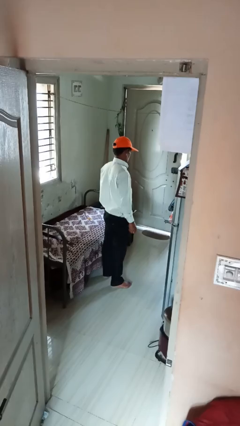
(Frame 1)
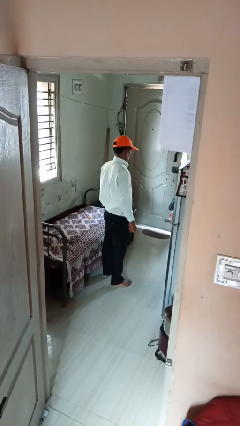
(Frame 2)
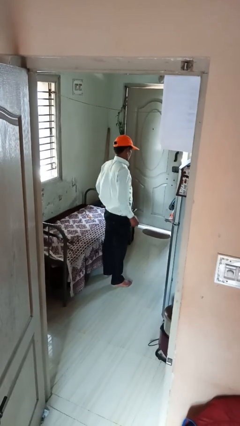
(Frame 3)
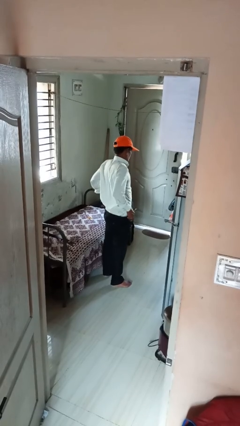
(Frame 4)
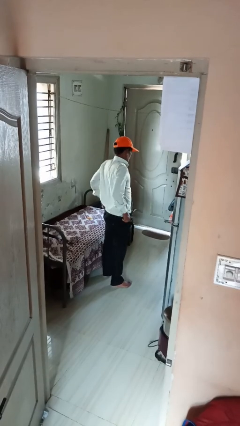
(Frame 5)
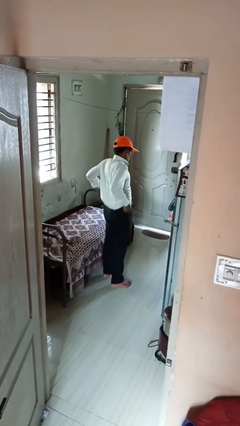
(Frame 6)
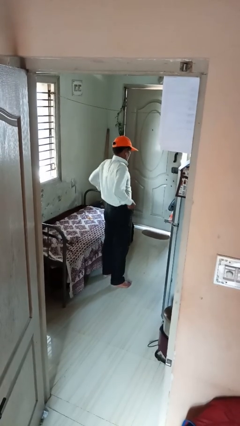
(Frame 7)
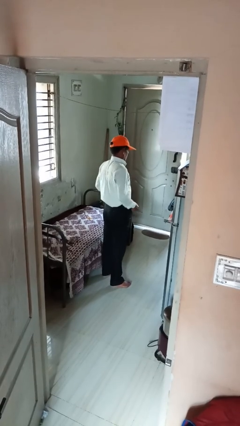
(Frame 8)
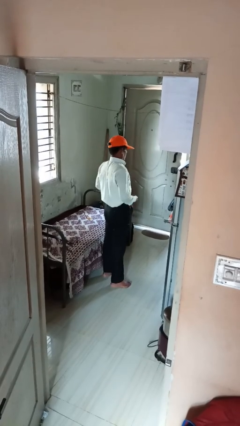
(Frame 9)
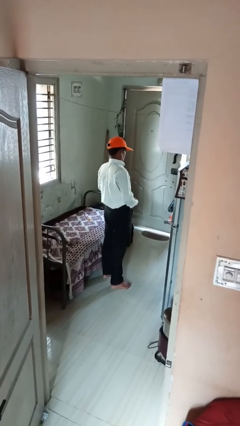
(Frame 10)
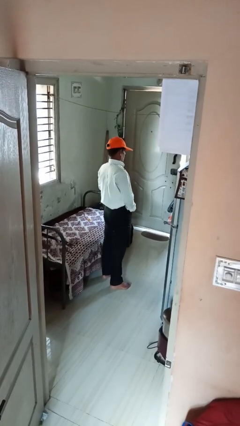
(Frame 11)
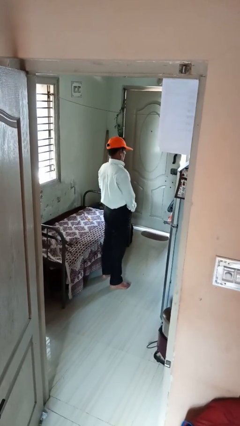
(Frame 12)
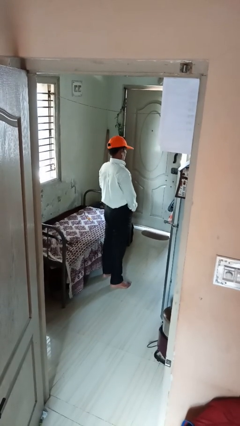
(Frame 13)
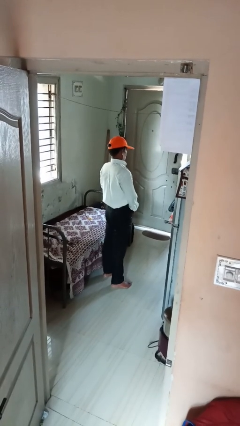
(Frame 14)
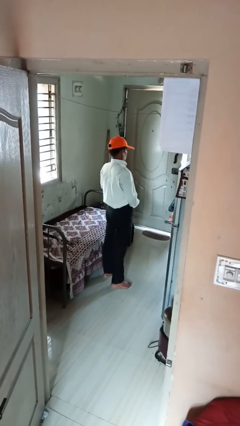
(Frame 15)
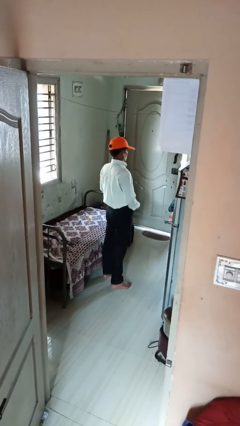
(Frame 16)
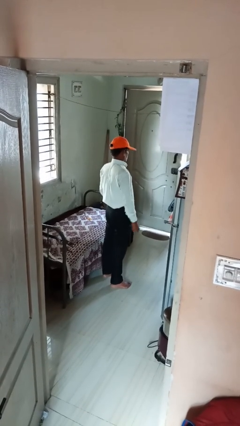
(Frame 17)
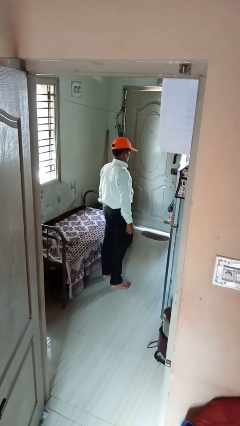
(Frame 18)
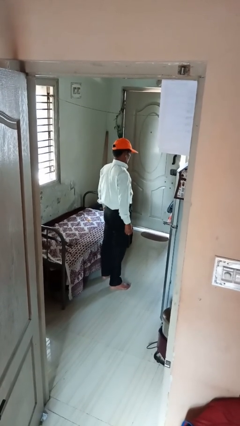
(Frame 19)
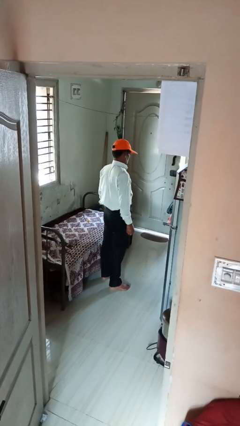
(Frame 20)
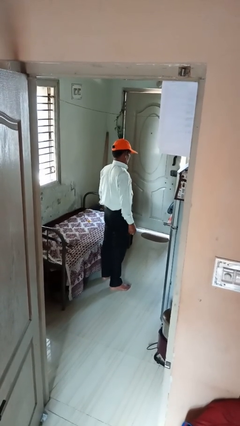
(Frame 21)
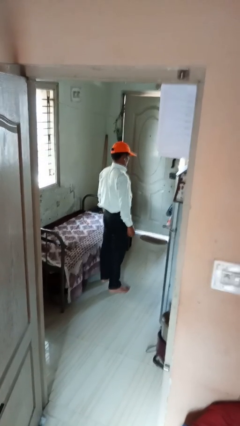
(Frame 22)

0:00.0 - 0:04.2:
person hikes up pants

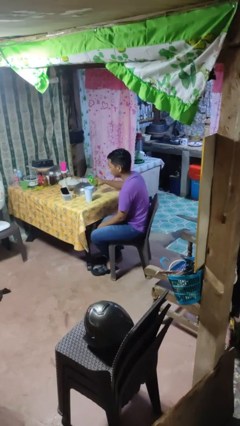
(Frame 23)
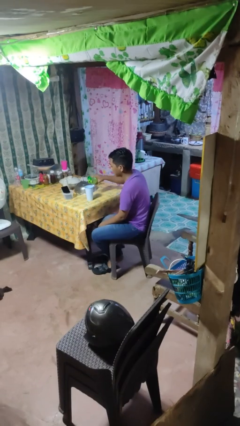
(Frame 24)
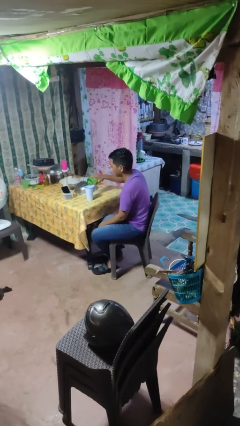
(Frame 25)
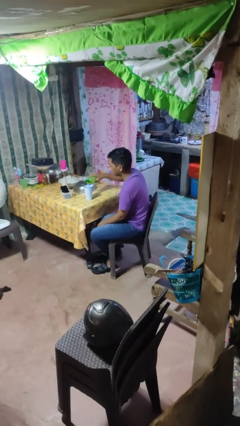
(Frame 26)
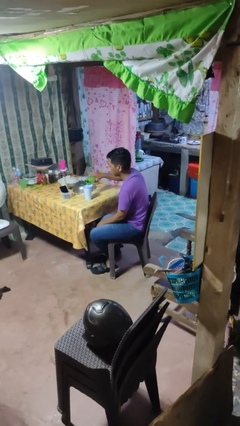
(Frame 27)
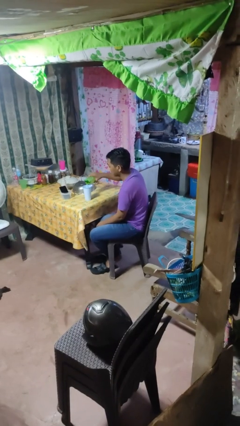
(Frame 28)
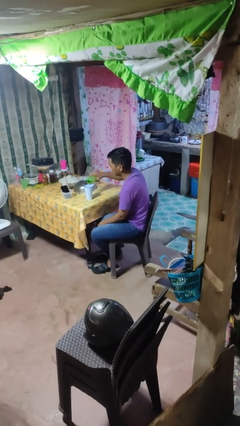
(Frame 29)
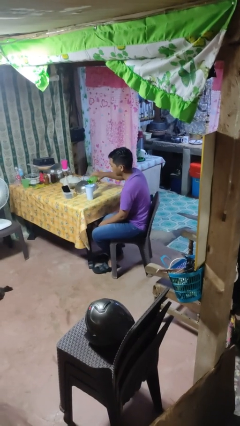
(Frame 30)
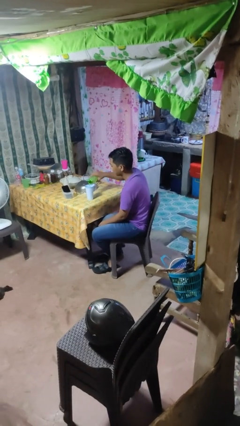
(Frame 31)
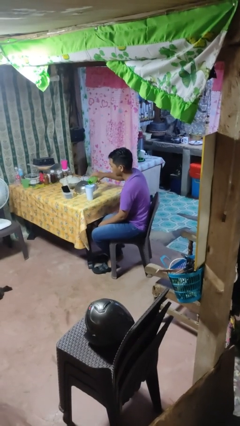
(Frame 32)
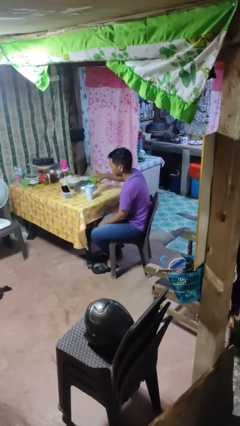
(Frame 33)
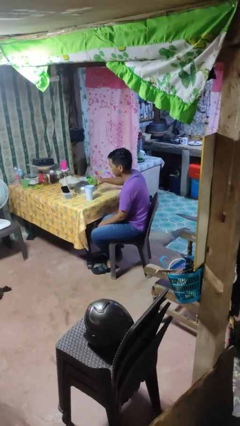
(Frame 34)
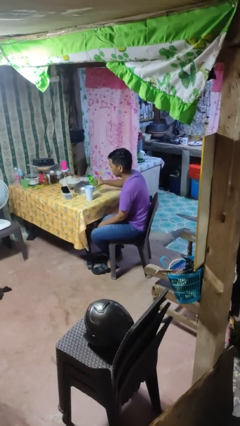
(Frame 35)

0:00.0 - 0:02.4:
person pours liquid into cup

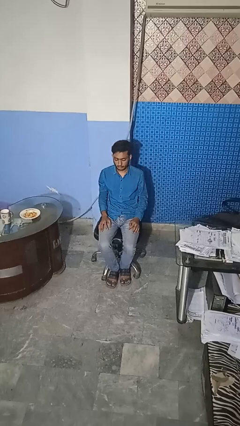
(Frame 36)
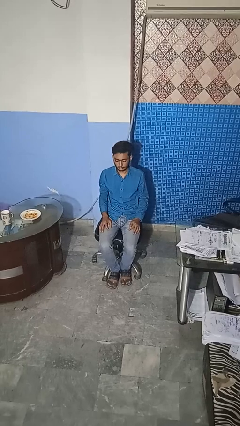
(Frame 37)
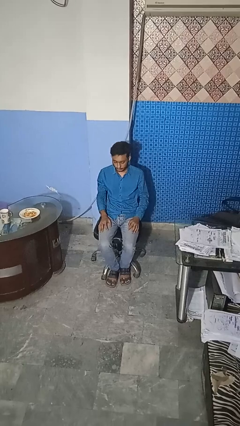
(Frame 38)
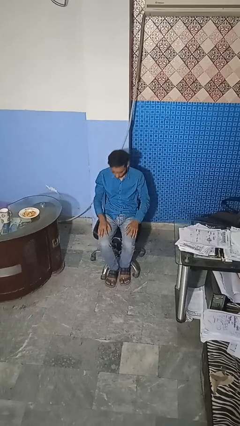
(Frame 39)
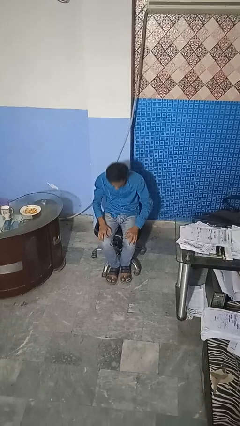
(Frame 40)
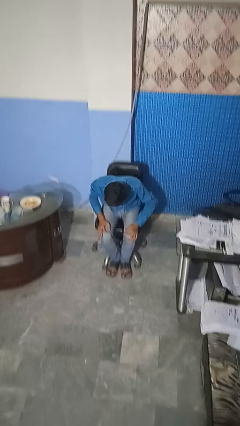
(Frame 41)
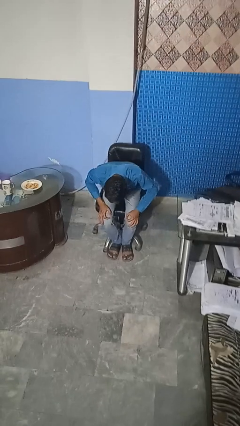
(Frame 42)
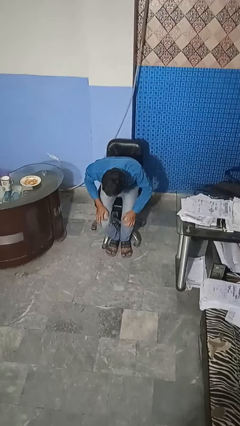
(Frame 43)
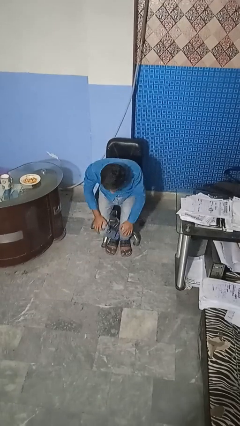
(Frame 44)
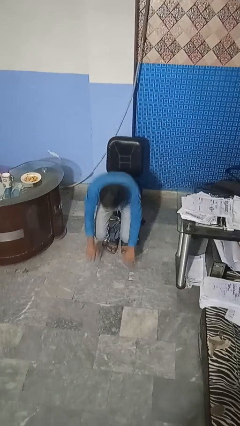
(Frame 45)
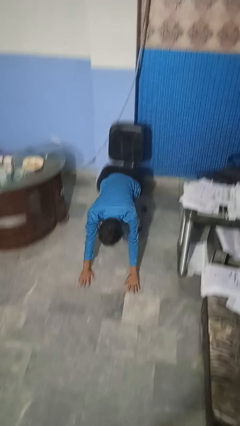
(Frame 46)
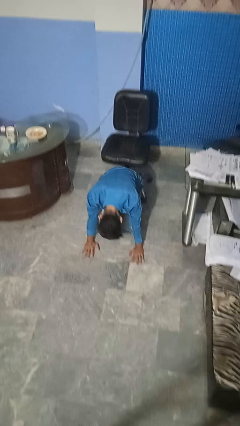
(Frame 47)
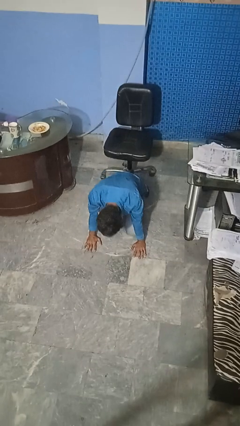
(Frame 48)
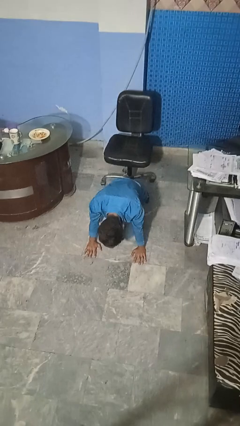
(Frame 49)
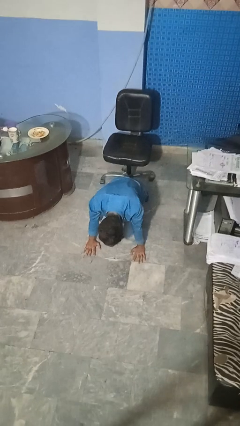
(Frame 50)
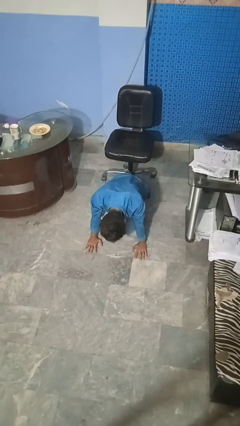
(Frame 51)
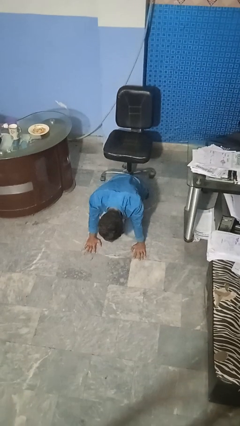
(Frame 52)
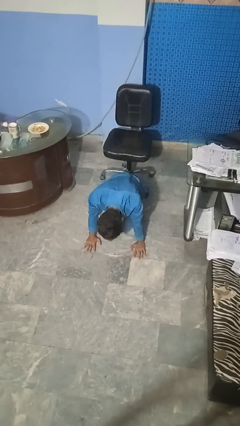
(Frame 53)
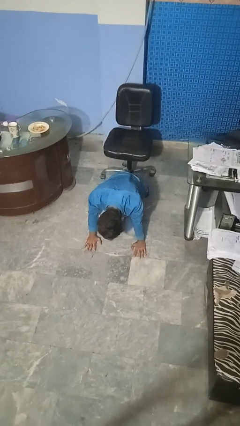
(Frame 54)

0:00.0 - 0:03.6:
person falls from chair

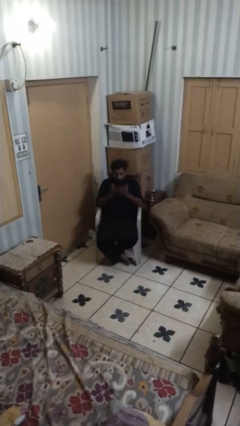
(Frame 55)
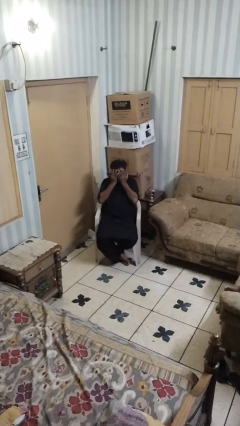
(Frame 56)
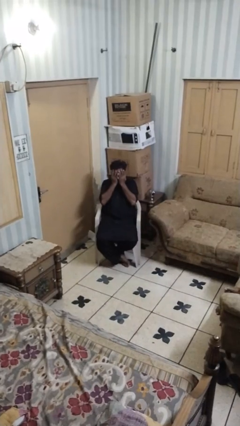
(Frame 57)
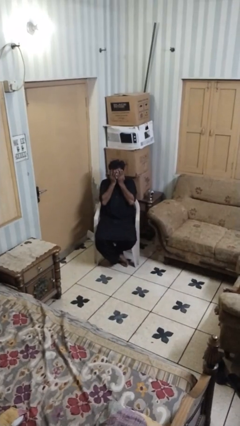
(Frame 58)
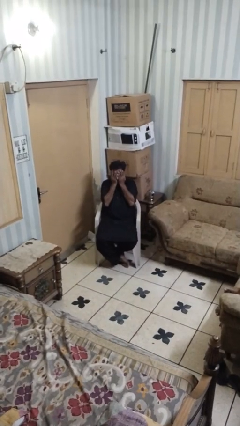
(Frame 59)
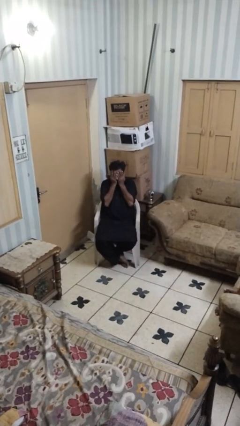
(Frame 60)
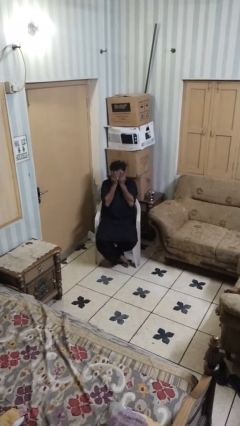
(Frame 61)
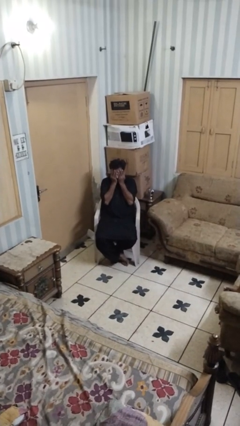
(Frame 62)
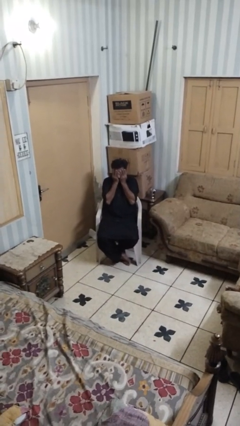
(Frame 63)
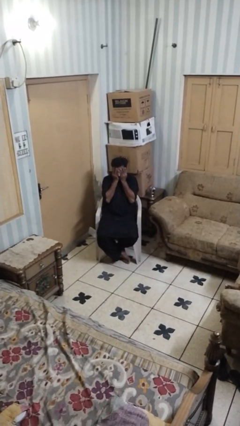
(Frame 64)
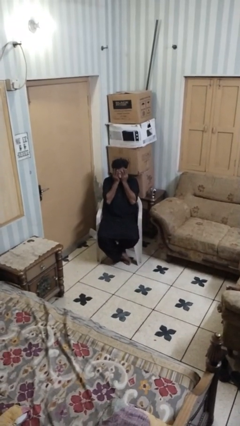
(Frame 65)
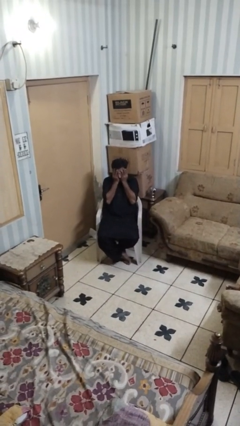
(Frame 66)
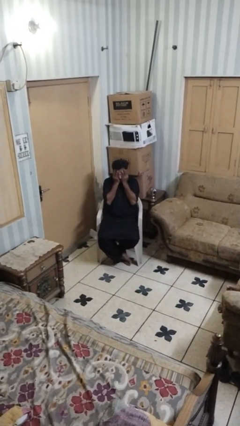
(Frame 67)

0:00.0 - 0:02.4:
person covers face with hands

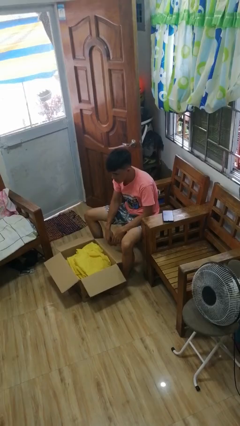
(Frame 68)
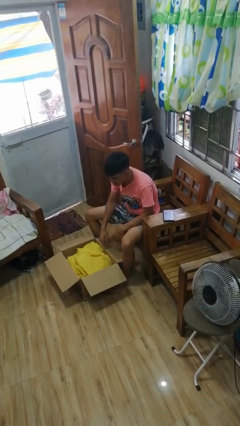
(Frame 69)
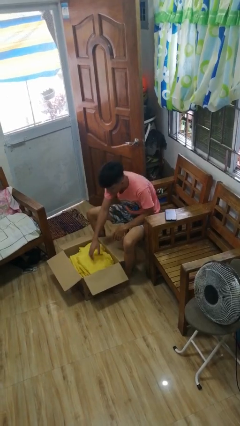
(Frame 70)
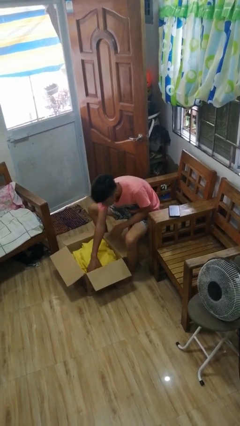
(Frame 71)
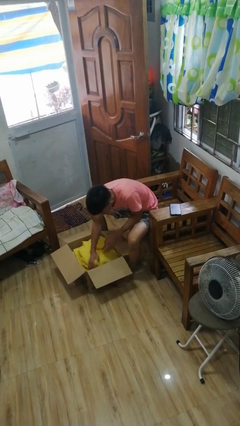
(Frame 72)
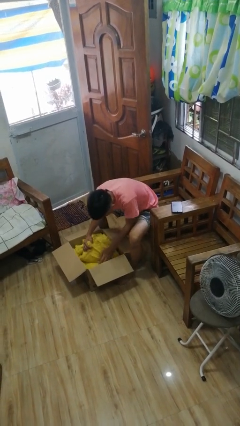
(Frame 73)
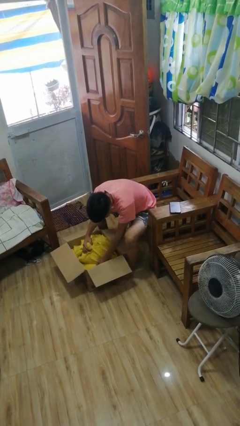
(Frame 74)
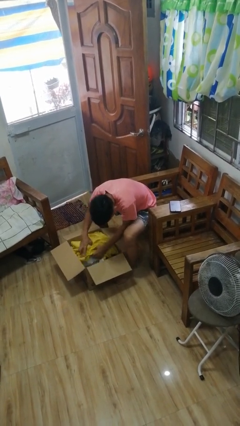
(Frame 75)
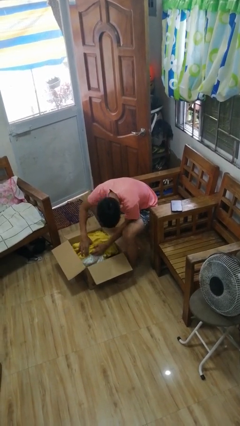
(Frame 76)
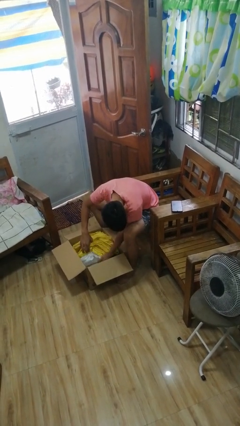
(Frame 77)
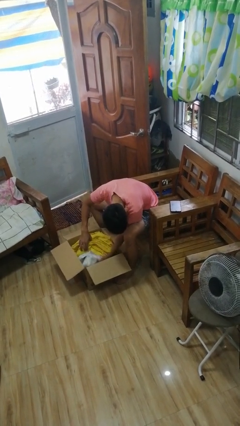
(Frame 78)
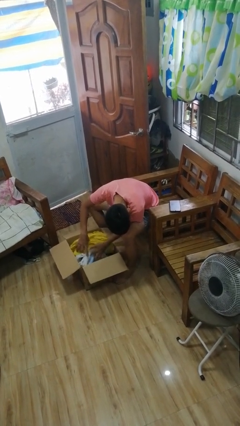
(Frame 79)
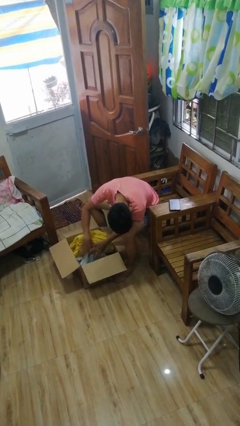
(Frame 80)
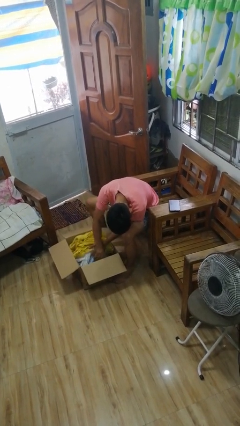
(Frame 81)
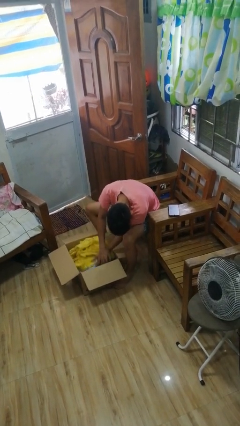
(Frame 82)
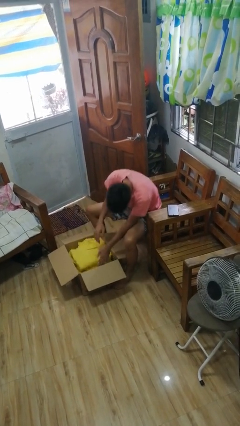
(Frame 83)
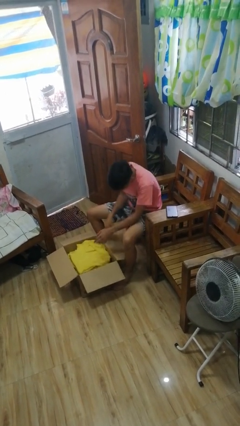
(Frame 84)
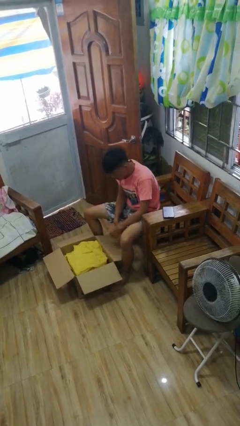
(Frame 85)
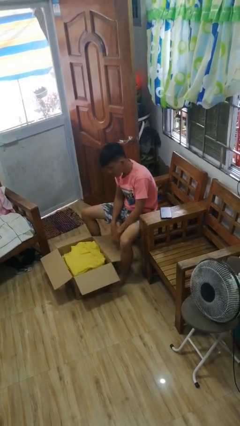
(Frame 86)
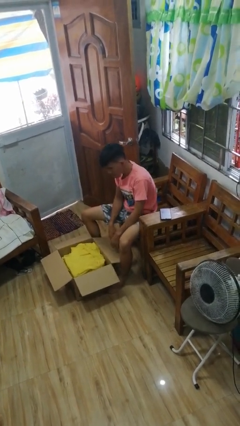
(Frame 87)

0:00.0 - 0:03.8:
person searches in box

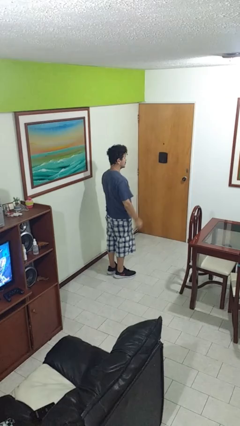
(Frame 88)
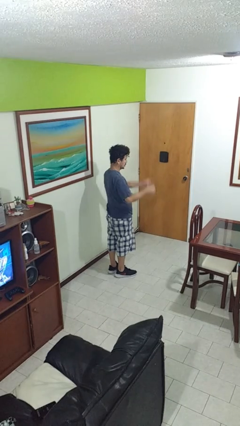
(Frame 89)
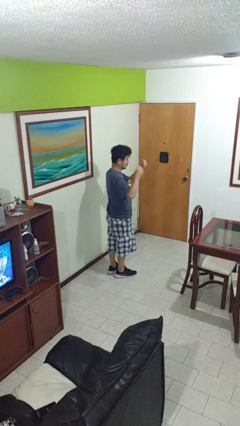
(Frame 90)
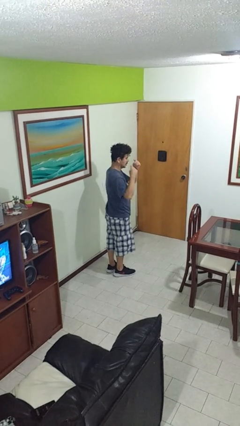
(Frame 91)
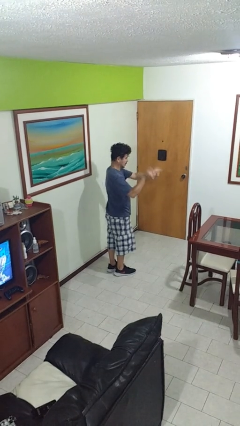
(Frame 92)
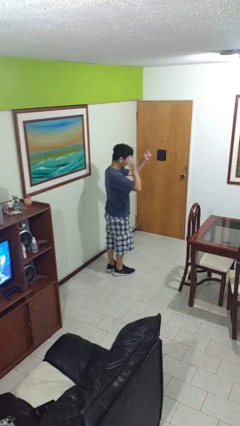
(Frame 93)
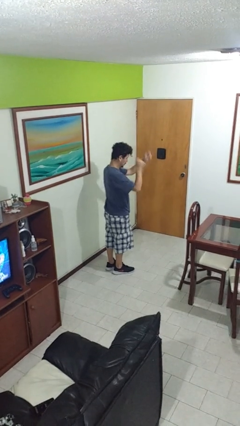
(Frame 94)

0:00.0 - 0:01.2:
person snaps fingers
